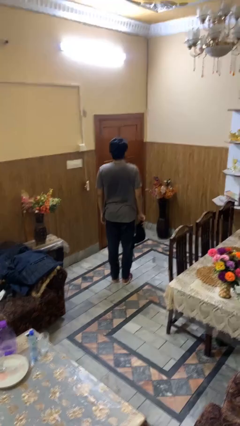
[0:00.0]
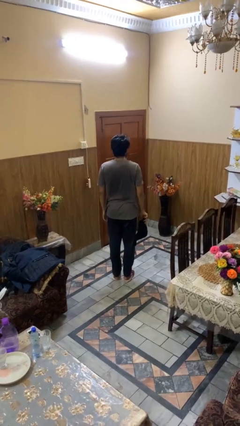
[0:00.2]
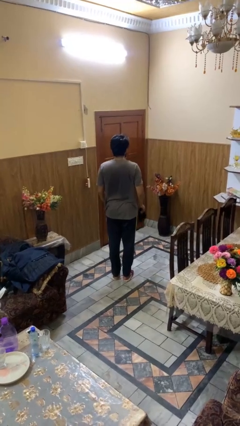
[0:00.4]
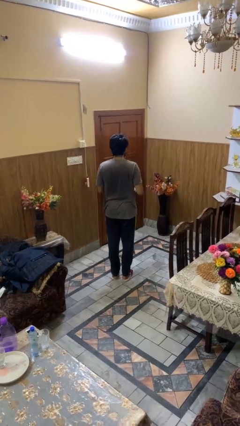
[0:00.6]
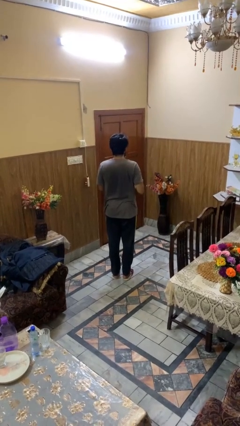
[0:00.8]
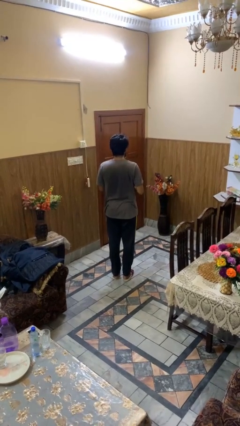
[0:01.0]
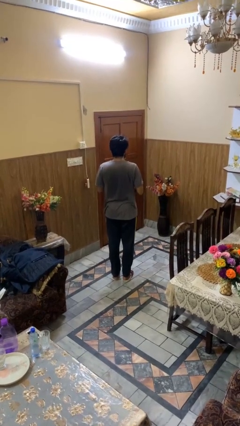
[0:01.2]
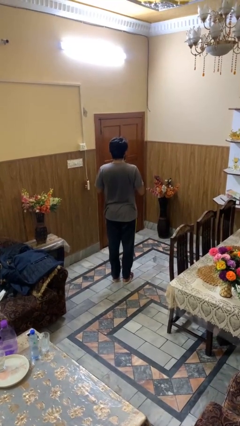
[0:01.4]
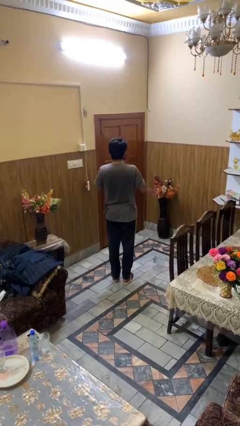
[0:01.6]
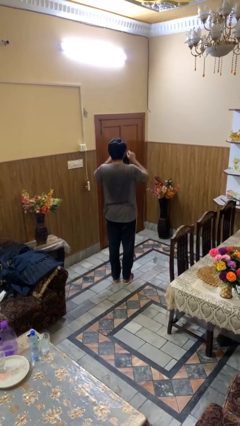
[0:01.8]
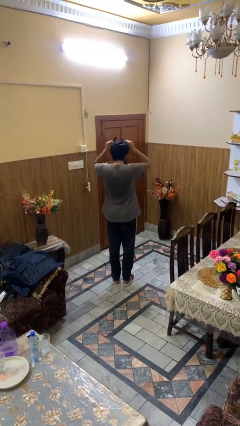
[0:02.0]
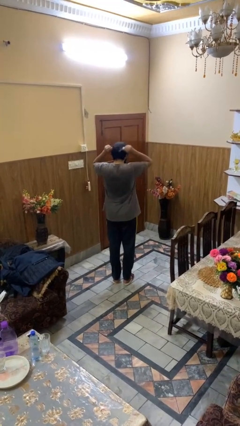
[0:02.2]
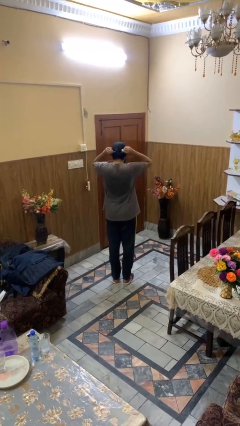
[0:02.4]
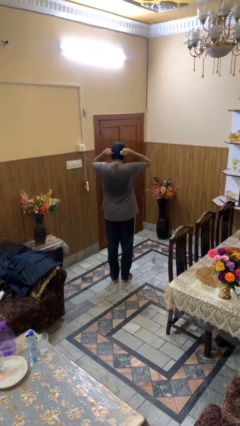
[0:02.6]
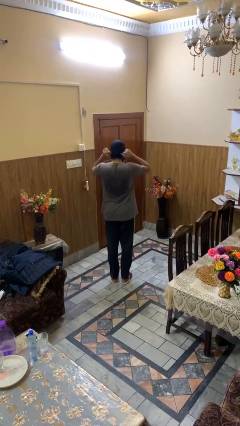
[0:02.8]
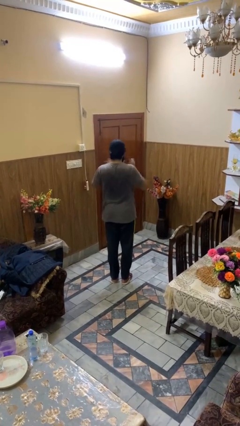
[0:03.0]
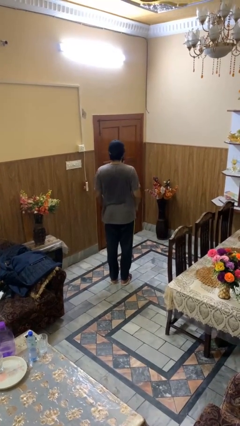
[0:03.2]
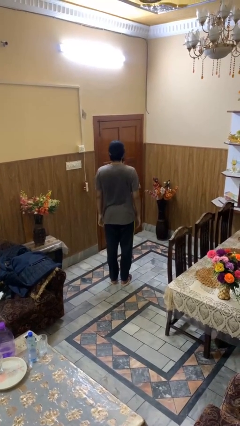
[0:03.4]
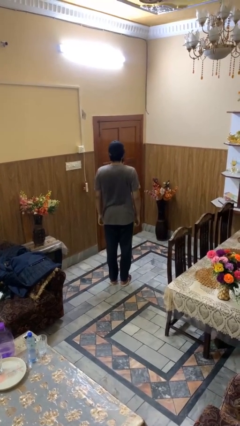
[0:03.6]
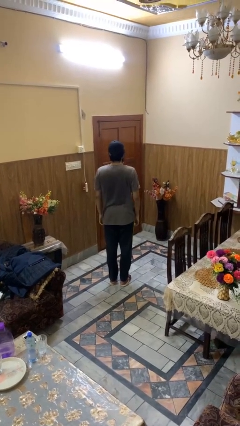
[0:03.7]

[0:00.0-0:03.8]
person puts on hat

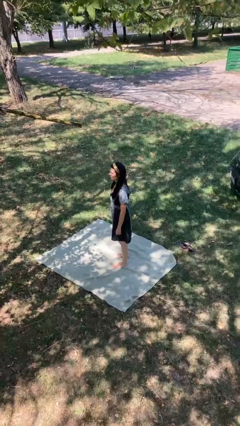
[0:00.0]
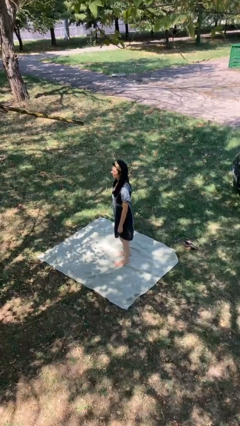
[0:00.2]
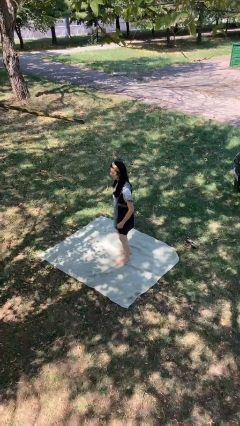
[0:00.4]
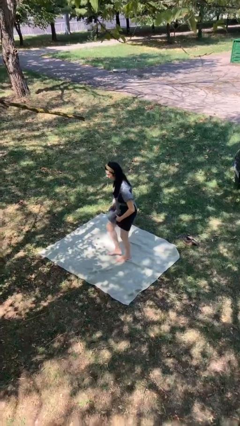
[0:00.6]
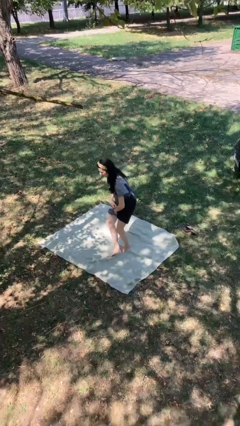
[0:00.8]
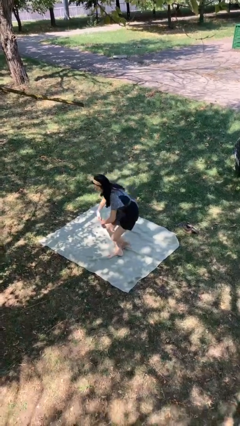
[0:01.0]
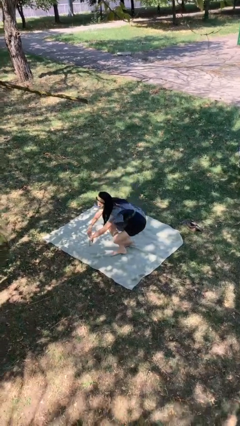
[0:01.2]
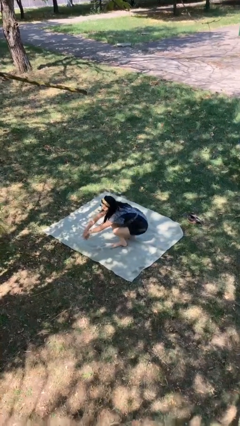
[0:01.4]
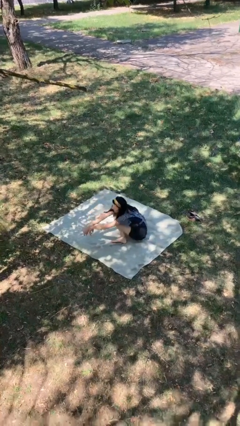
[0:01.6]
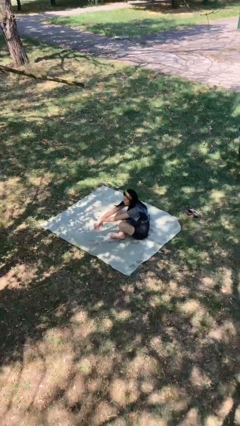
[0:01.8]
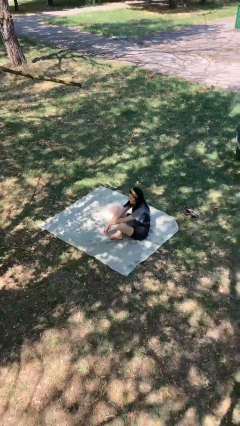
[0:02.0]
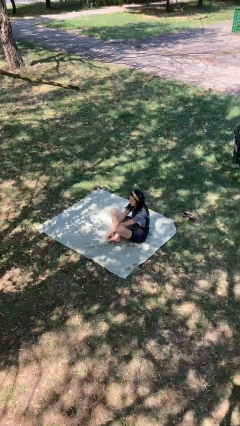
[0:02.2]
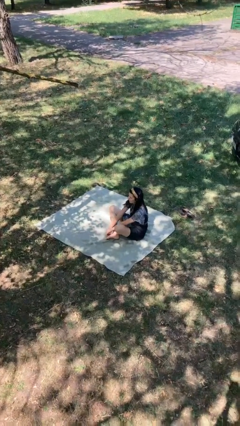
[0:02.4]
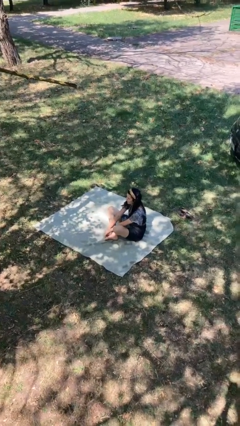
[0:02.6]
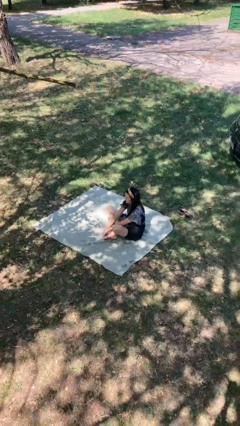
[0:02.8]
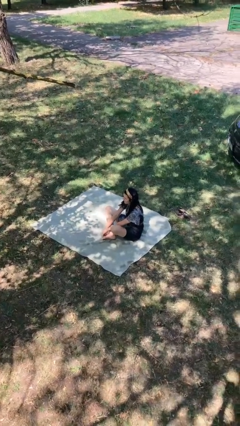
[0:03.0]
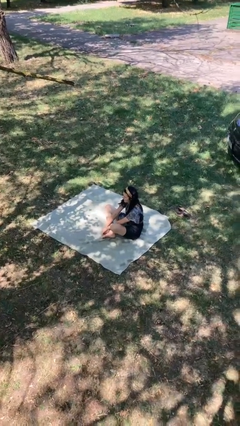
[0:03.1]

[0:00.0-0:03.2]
person sits crisscross

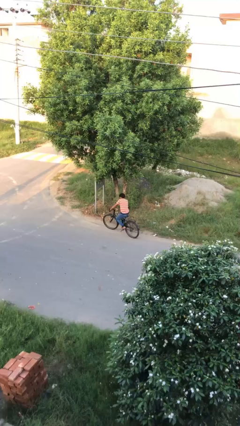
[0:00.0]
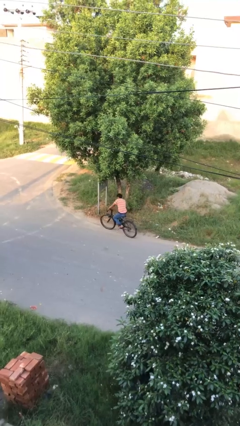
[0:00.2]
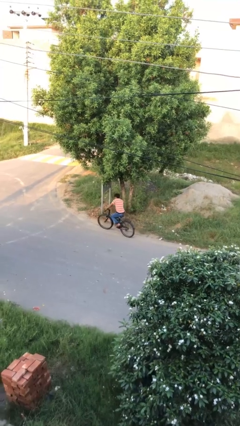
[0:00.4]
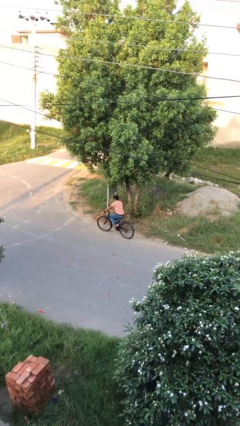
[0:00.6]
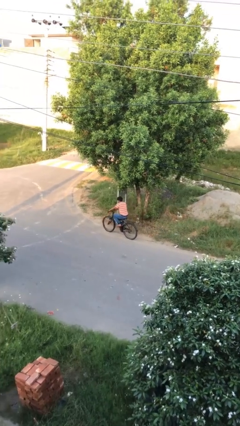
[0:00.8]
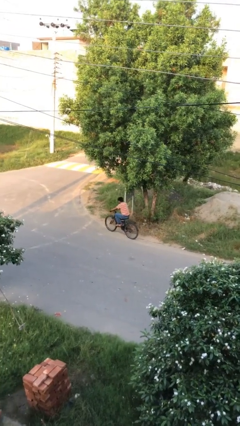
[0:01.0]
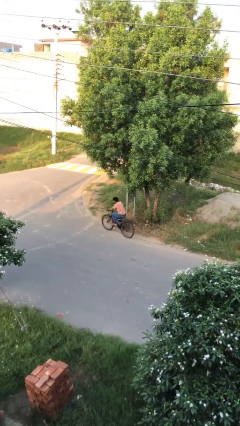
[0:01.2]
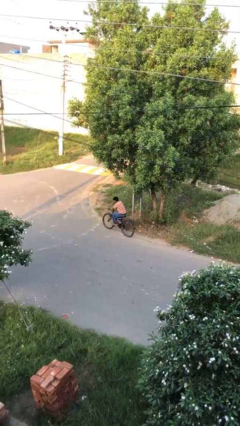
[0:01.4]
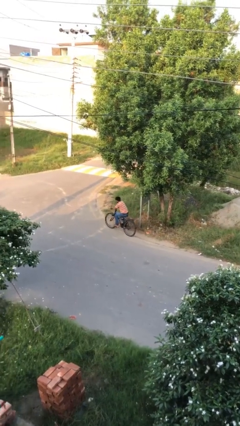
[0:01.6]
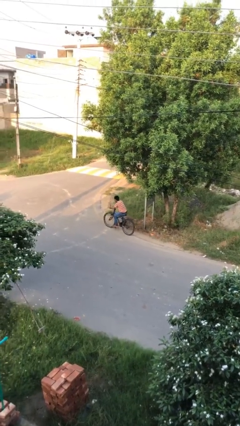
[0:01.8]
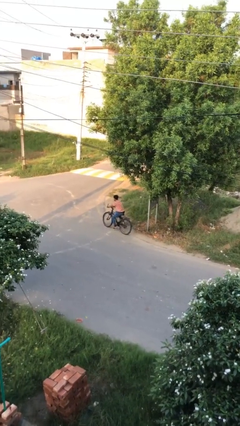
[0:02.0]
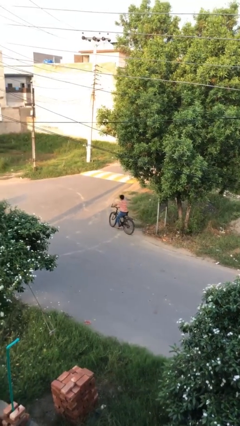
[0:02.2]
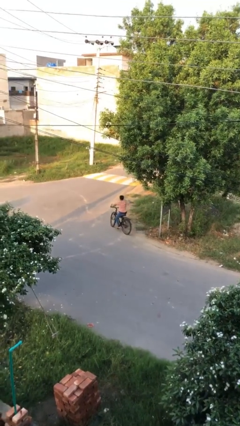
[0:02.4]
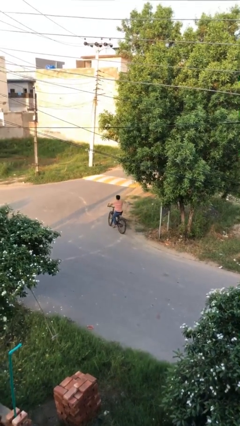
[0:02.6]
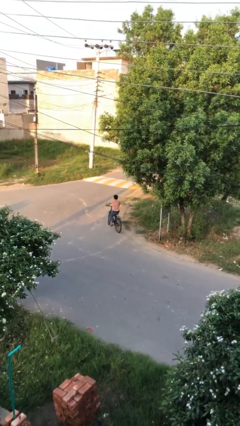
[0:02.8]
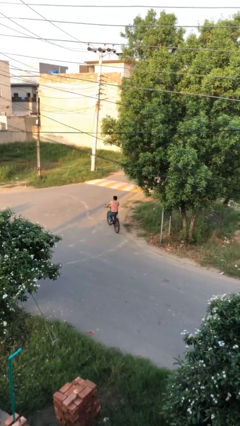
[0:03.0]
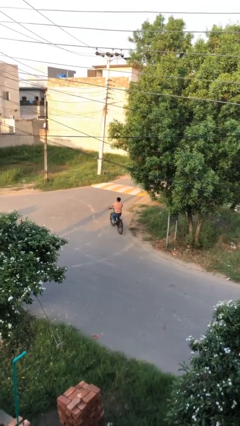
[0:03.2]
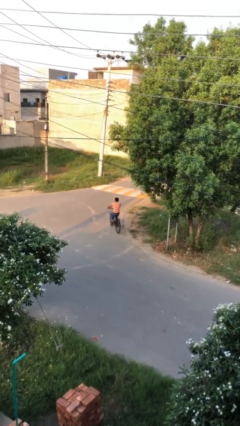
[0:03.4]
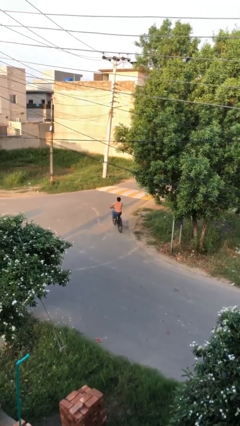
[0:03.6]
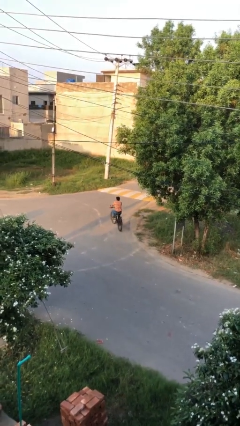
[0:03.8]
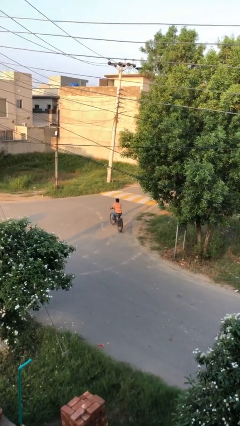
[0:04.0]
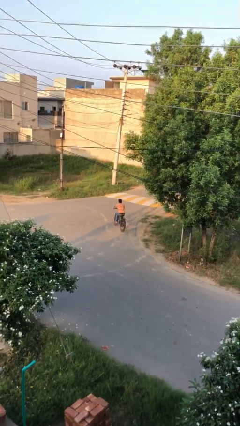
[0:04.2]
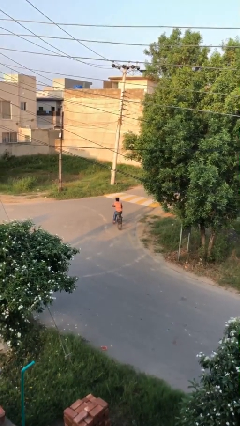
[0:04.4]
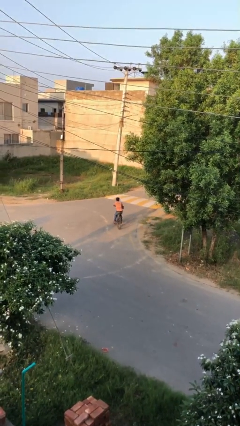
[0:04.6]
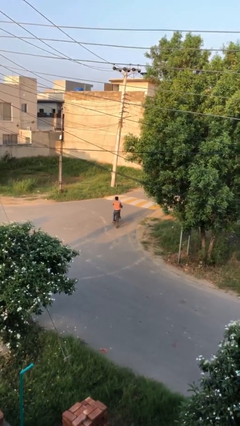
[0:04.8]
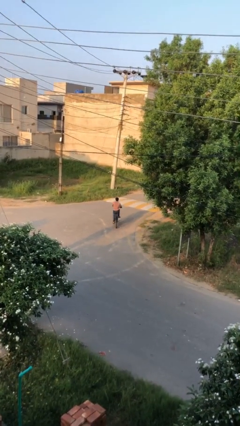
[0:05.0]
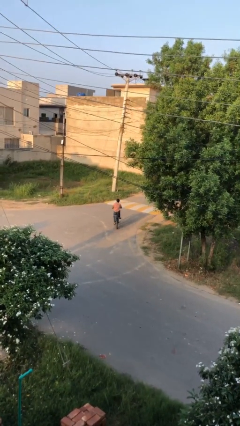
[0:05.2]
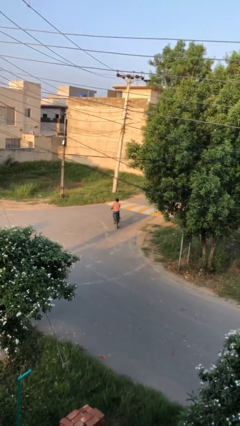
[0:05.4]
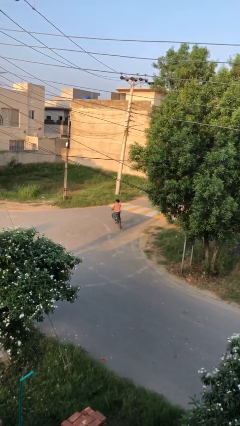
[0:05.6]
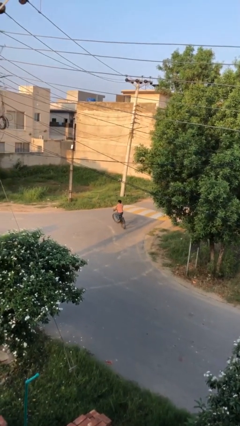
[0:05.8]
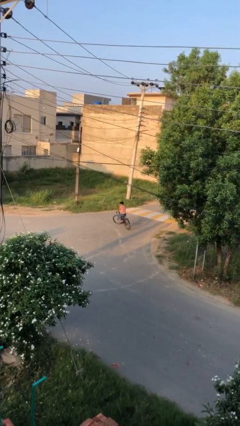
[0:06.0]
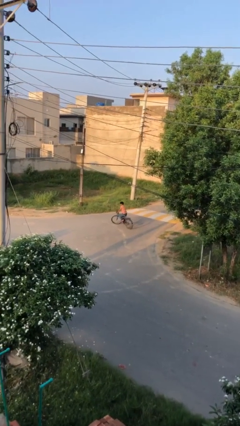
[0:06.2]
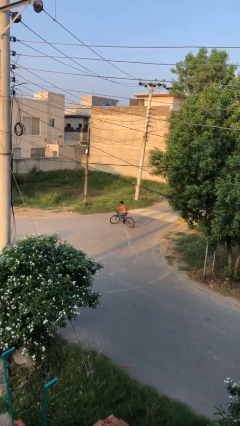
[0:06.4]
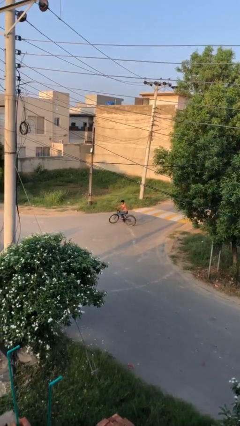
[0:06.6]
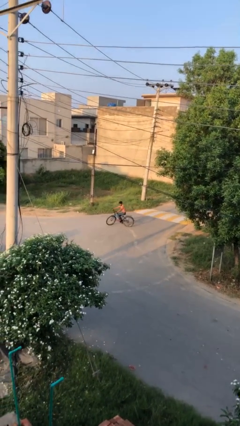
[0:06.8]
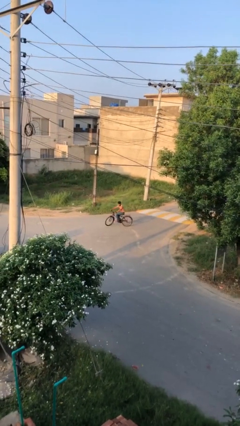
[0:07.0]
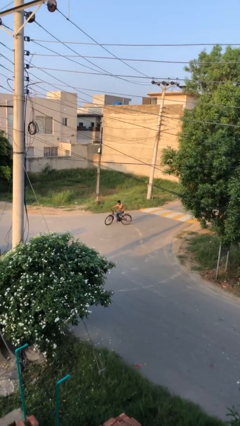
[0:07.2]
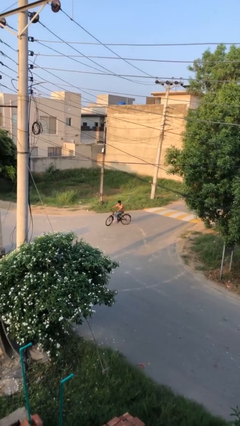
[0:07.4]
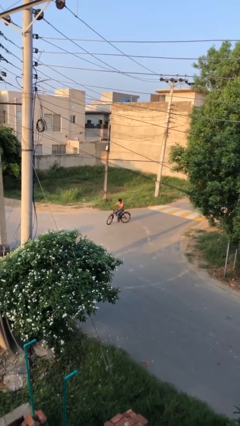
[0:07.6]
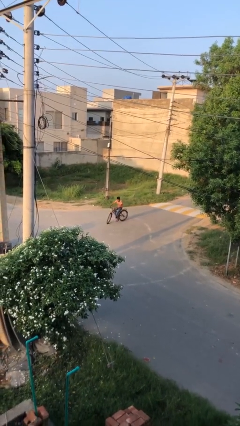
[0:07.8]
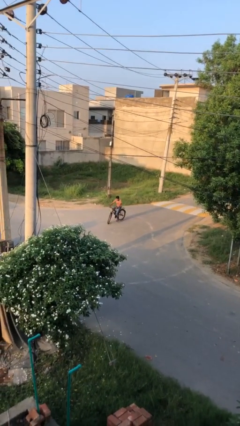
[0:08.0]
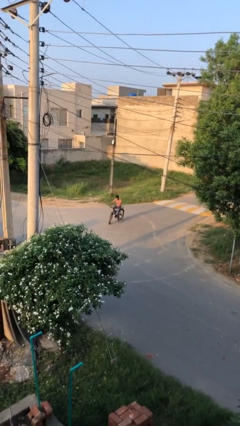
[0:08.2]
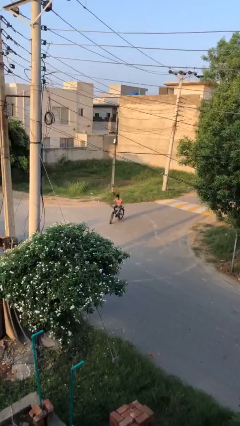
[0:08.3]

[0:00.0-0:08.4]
person rides bicycle

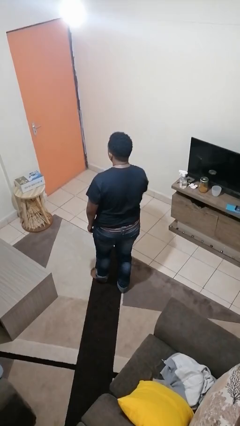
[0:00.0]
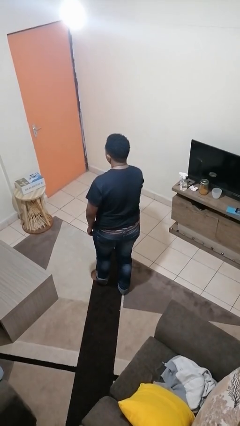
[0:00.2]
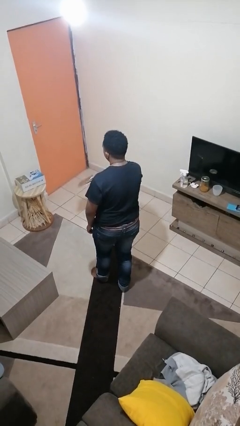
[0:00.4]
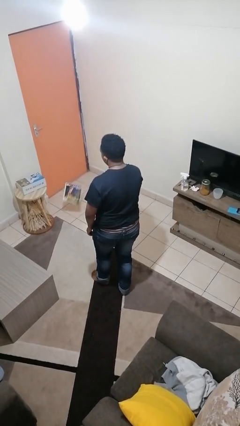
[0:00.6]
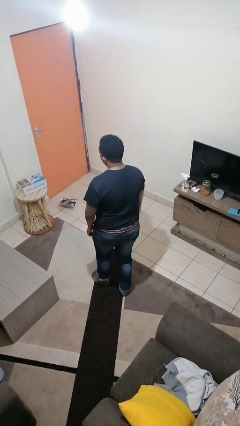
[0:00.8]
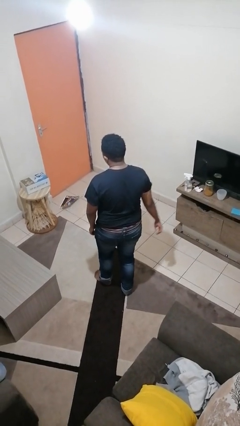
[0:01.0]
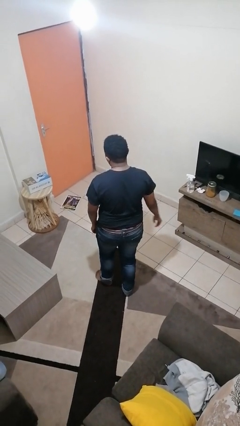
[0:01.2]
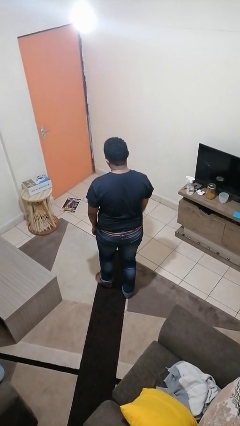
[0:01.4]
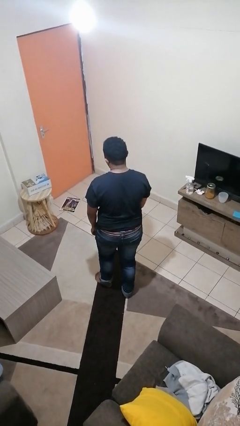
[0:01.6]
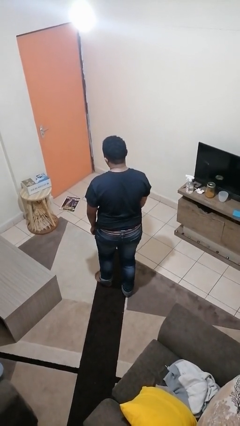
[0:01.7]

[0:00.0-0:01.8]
person throws object to ground

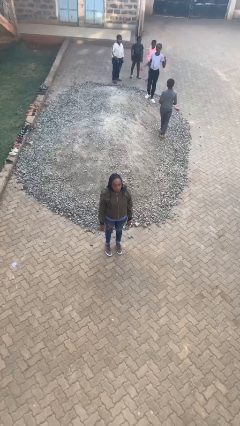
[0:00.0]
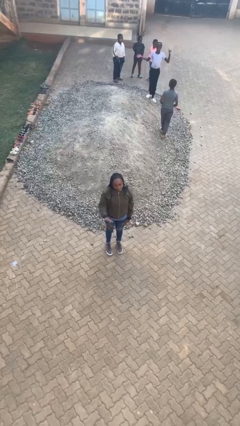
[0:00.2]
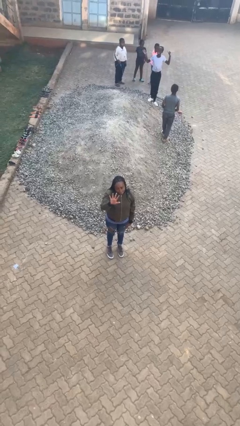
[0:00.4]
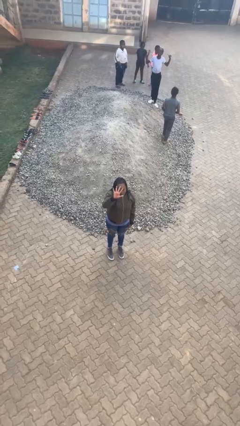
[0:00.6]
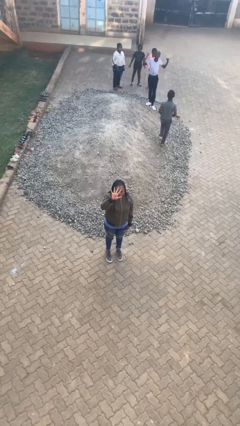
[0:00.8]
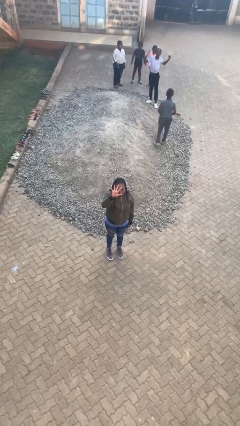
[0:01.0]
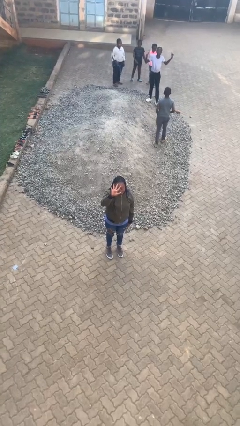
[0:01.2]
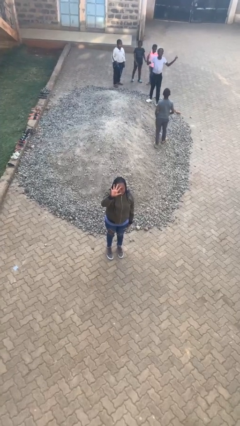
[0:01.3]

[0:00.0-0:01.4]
person gestures number five
